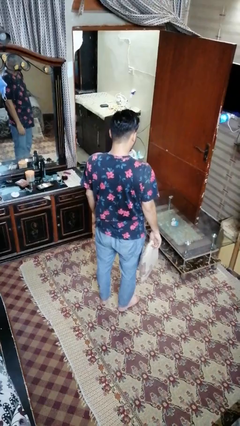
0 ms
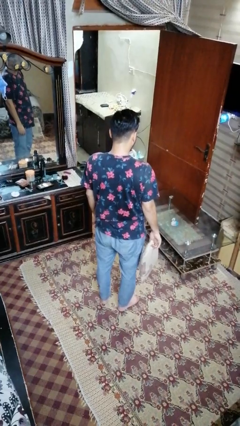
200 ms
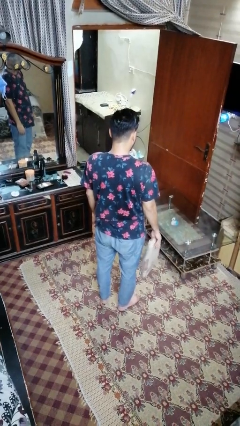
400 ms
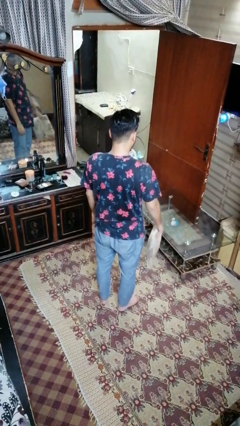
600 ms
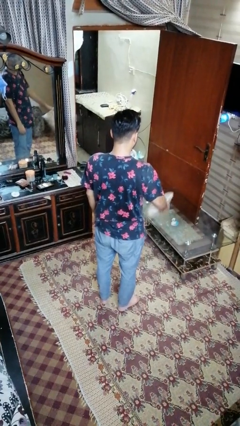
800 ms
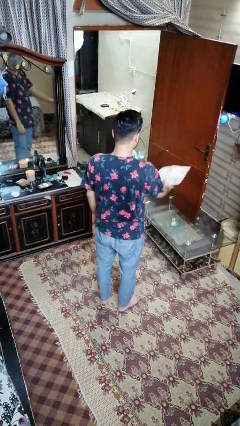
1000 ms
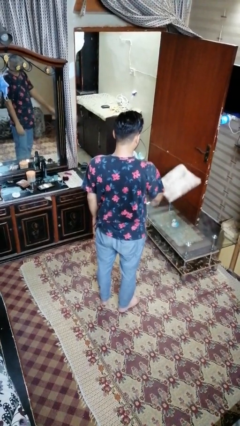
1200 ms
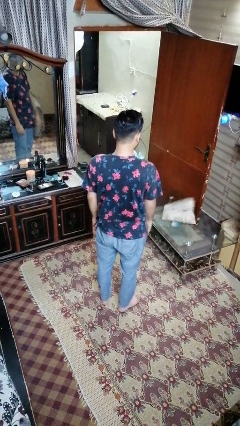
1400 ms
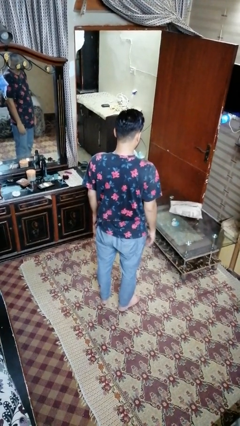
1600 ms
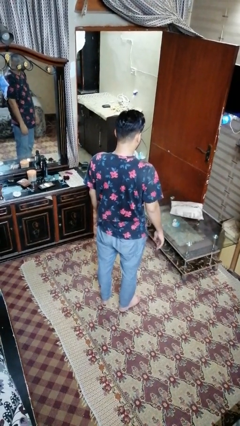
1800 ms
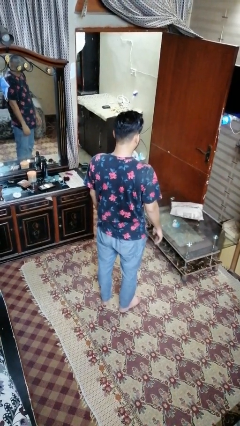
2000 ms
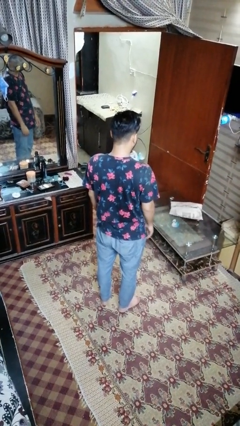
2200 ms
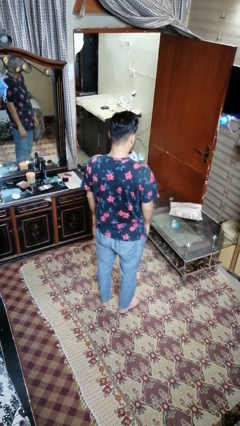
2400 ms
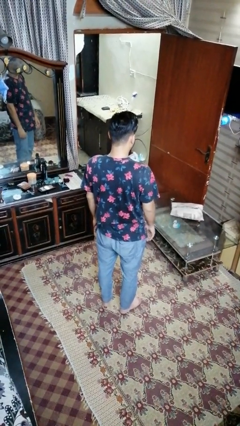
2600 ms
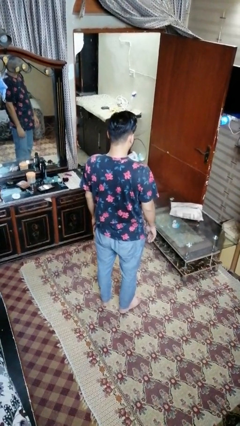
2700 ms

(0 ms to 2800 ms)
person throws object on table

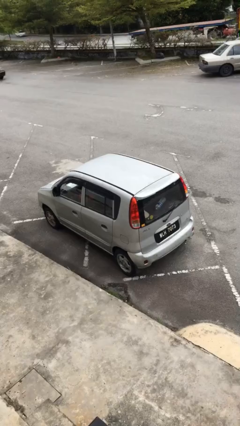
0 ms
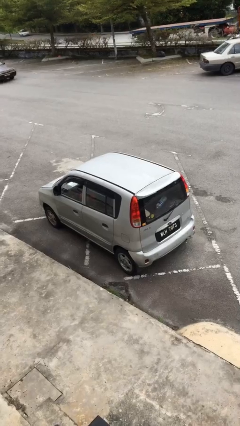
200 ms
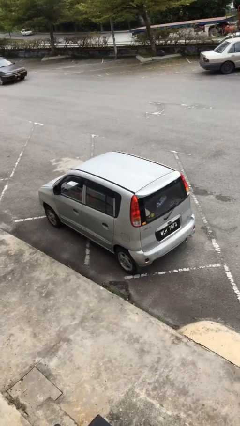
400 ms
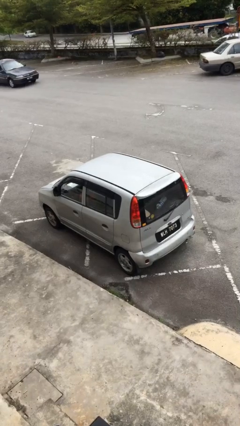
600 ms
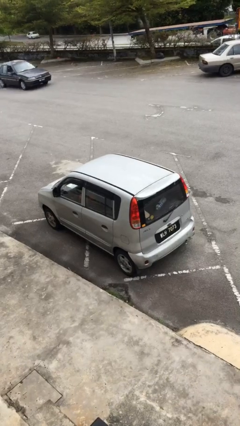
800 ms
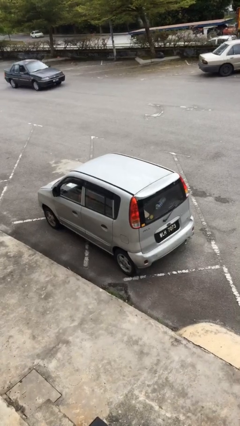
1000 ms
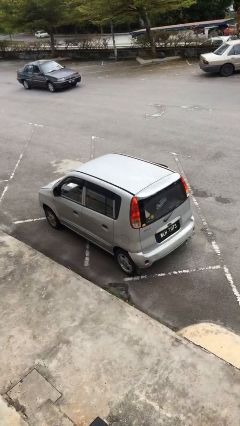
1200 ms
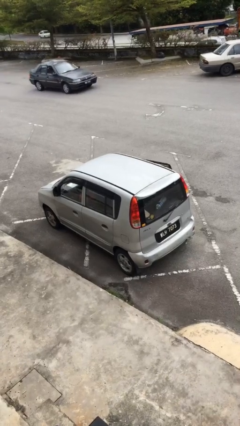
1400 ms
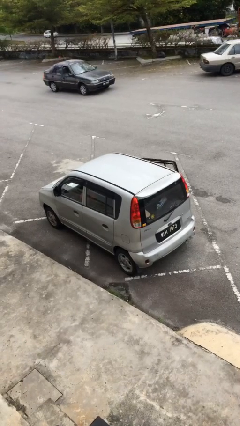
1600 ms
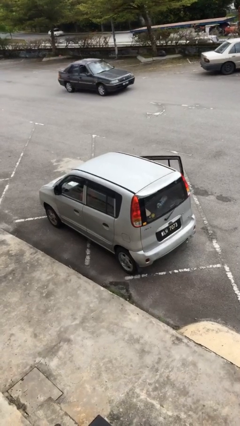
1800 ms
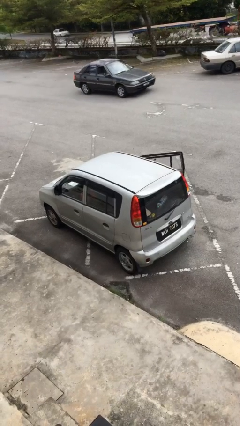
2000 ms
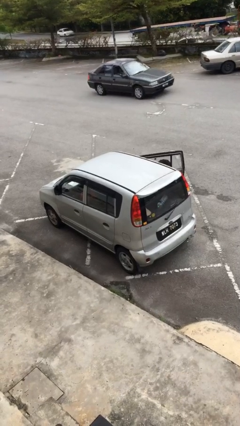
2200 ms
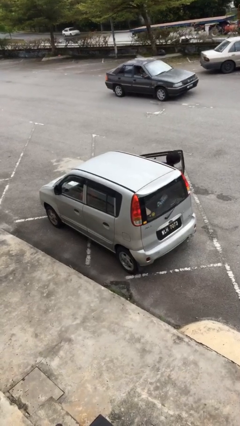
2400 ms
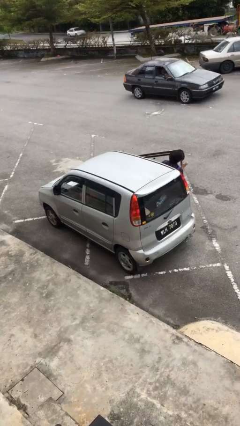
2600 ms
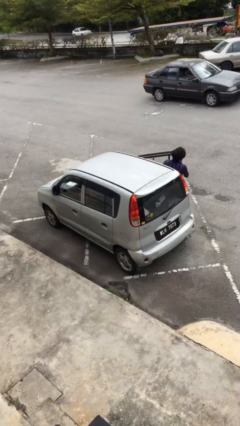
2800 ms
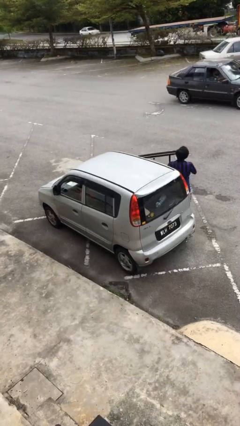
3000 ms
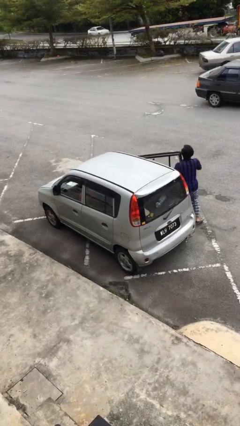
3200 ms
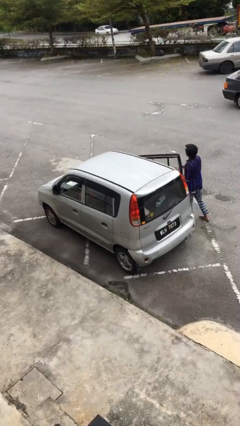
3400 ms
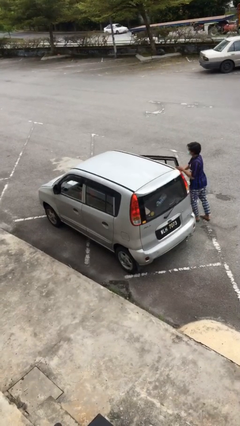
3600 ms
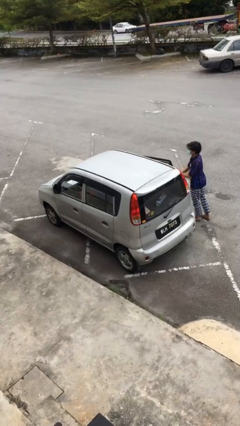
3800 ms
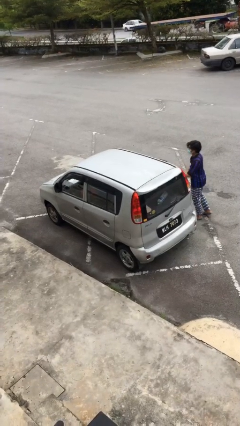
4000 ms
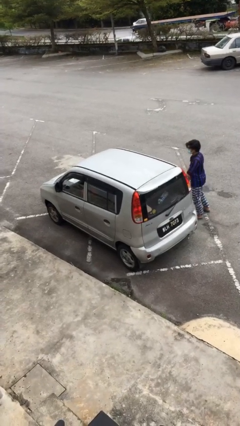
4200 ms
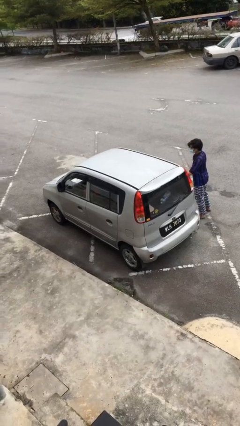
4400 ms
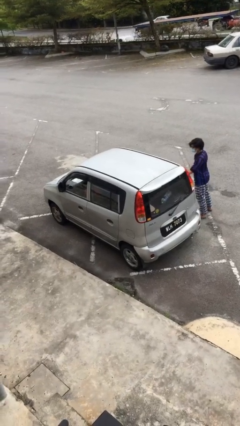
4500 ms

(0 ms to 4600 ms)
car drops off person

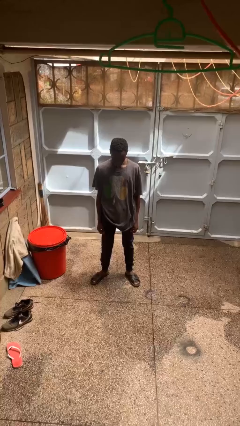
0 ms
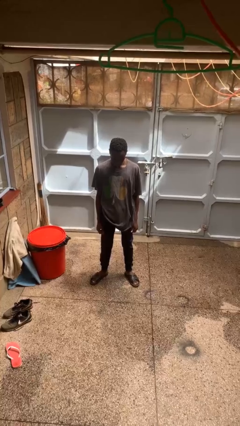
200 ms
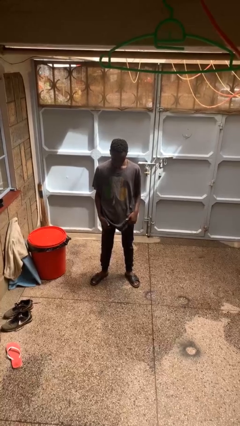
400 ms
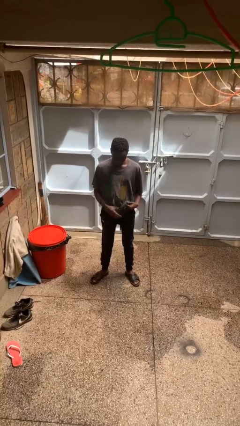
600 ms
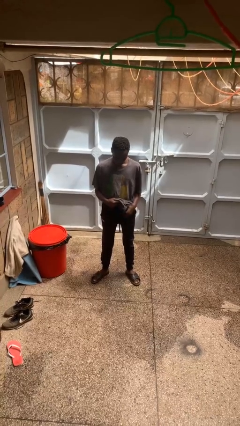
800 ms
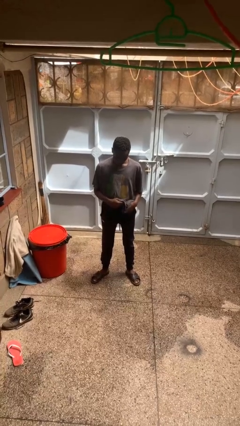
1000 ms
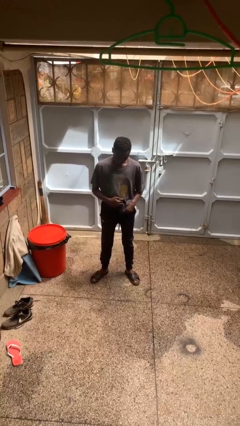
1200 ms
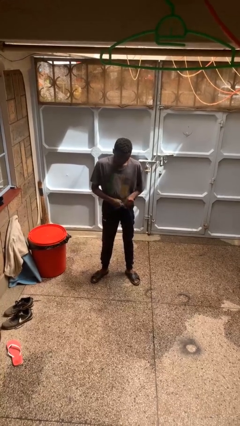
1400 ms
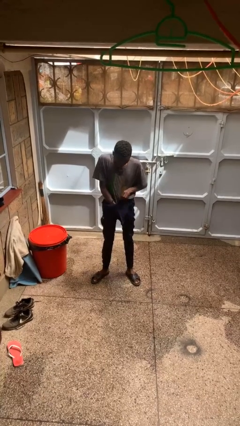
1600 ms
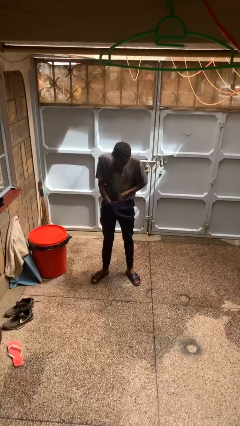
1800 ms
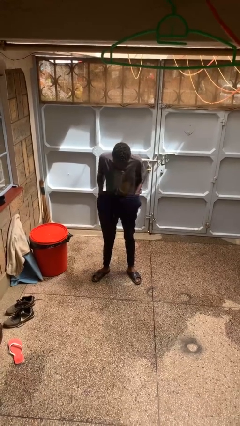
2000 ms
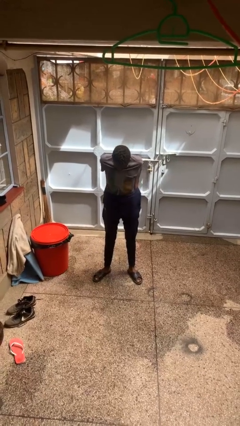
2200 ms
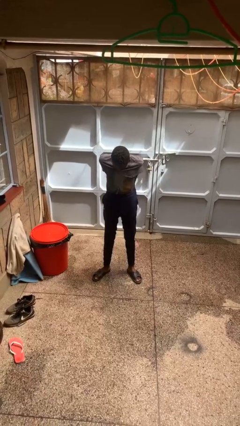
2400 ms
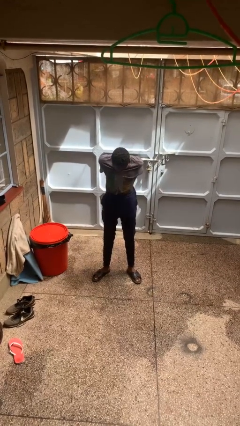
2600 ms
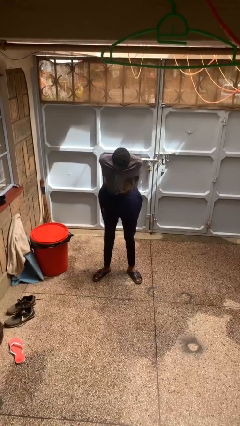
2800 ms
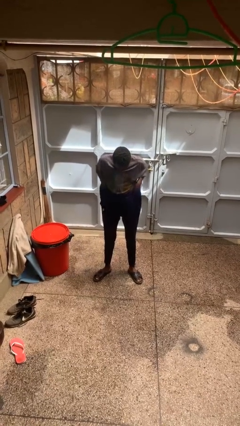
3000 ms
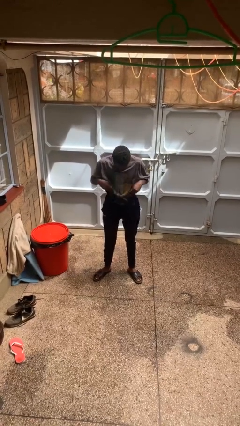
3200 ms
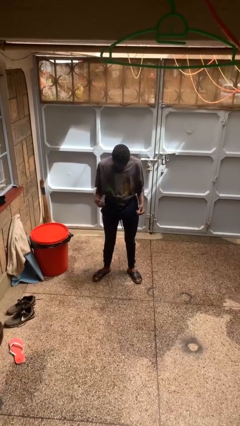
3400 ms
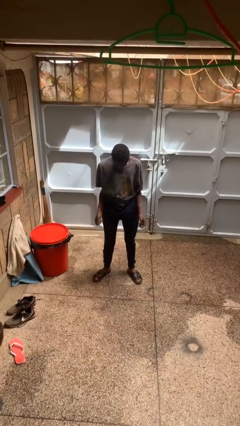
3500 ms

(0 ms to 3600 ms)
person tucks in shirt

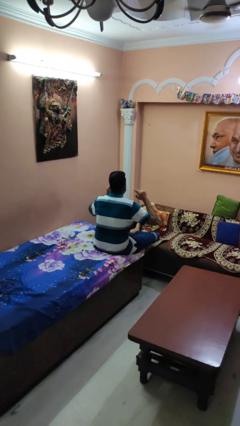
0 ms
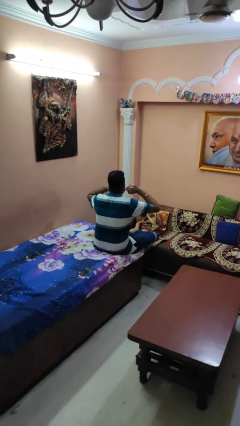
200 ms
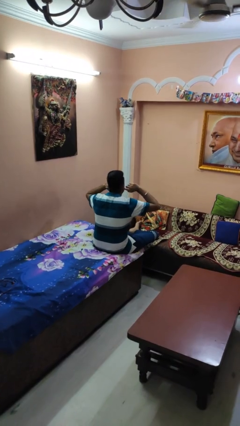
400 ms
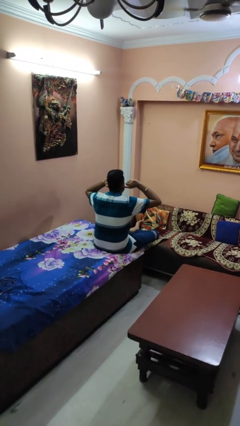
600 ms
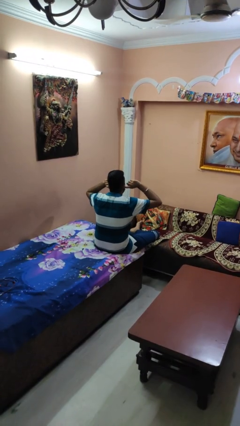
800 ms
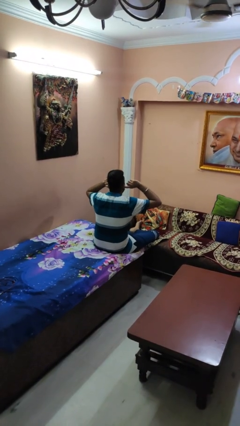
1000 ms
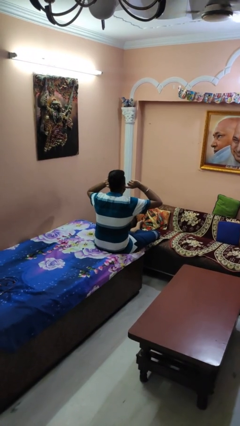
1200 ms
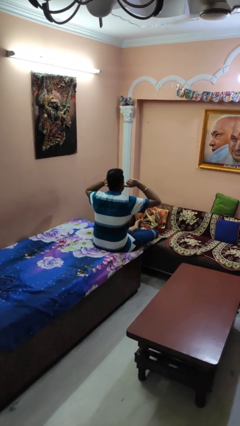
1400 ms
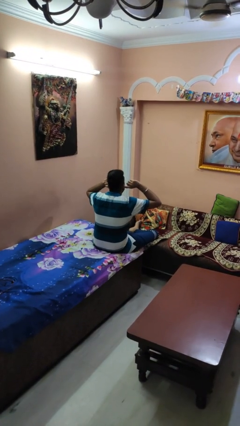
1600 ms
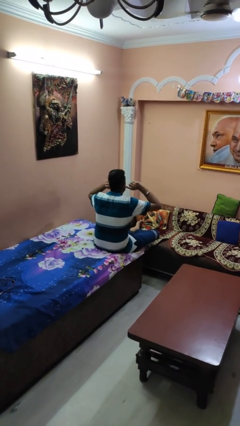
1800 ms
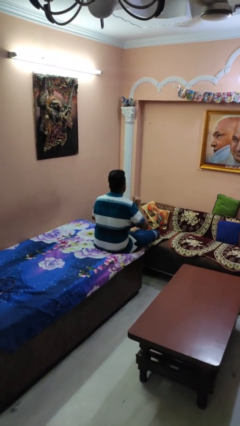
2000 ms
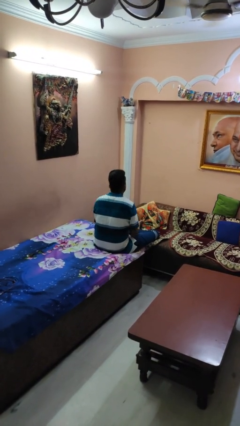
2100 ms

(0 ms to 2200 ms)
person puts fingers in ear

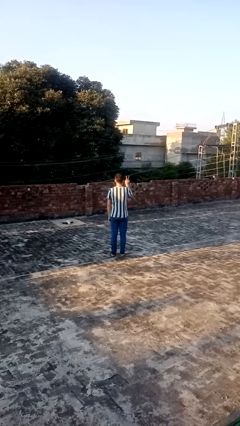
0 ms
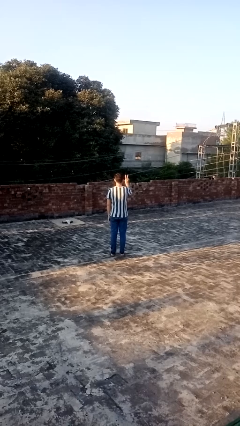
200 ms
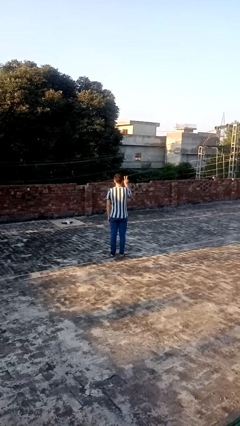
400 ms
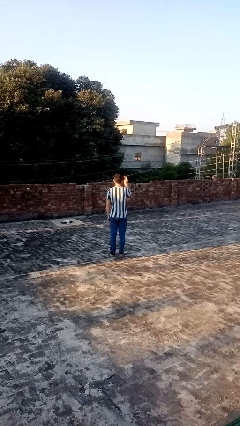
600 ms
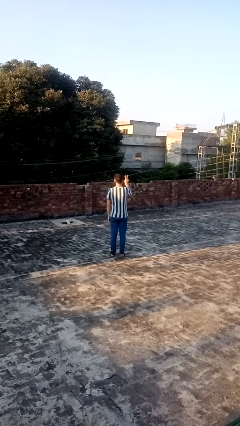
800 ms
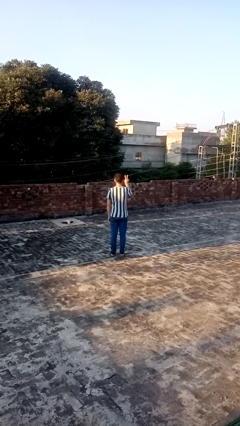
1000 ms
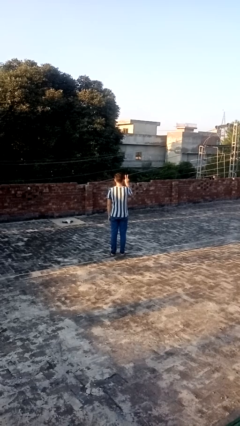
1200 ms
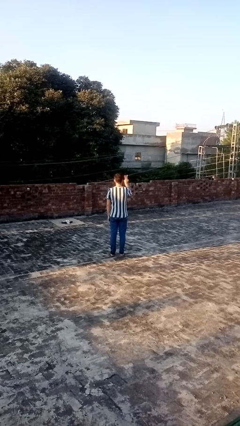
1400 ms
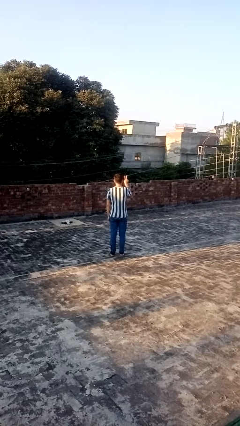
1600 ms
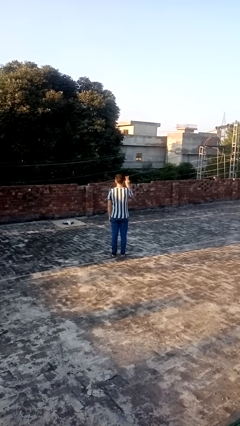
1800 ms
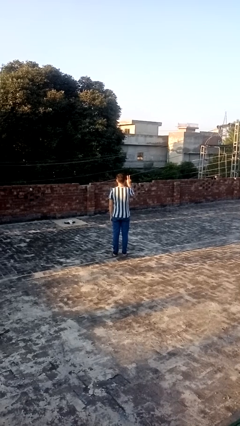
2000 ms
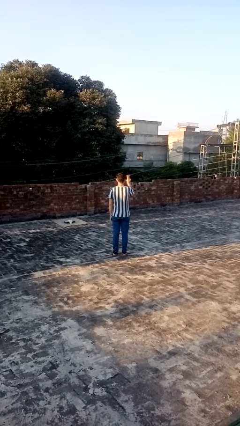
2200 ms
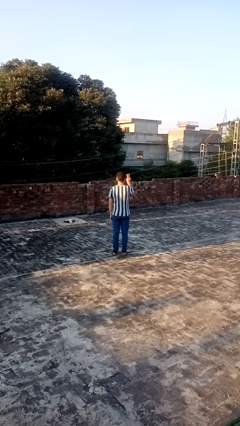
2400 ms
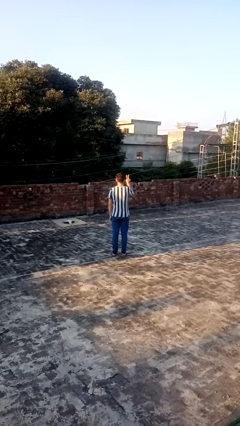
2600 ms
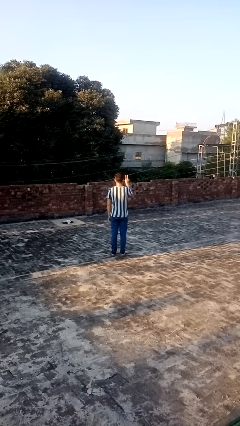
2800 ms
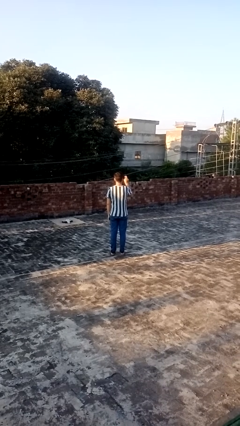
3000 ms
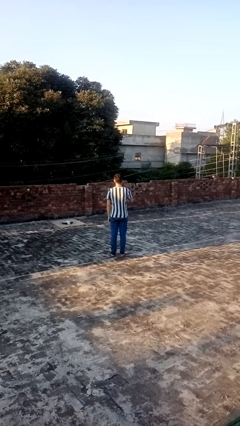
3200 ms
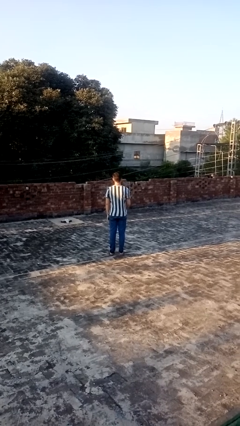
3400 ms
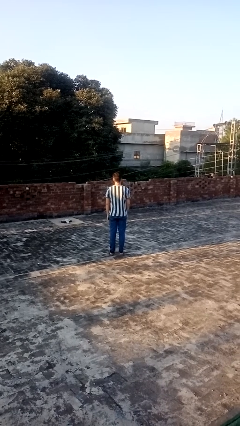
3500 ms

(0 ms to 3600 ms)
person gestures peace

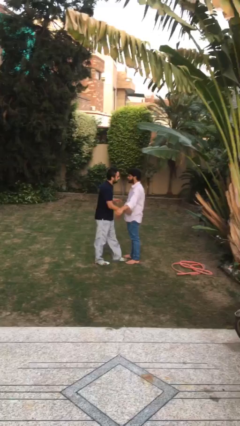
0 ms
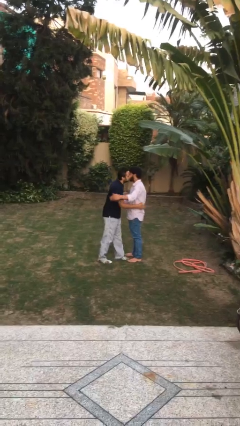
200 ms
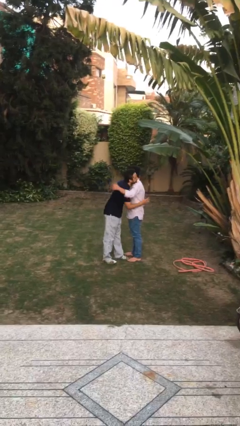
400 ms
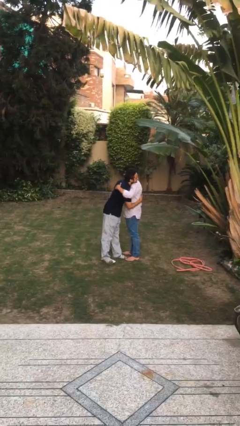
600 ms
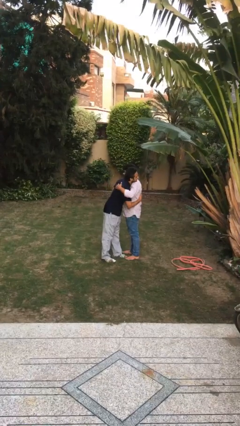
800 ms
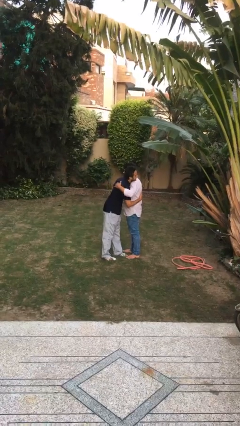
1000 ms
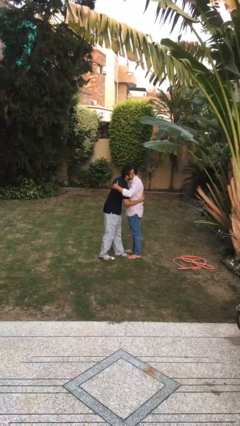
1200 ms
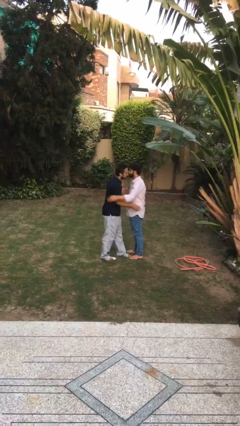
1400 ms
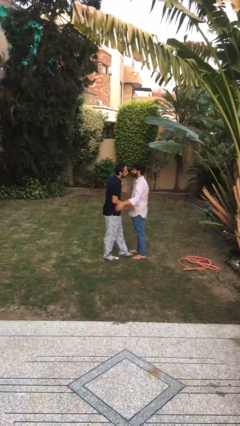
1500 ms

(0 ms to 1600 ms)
person embraces person
